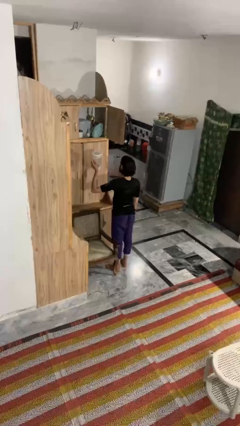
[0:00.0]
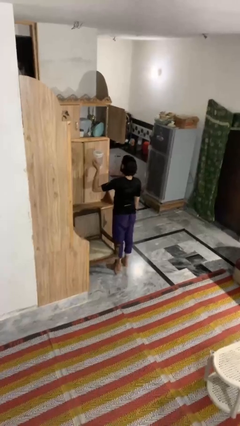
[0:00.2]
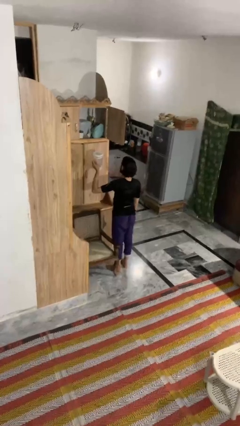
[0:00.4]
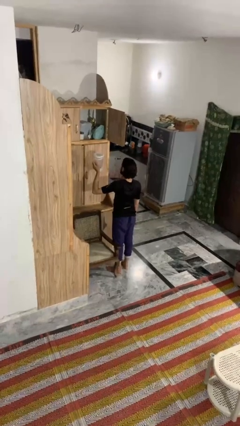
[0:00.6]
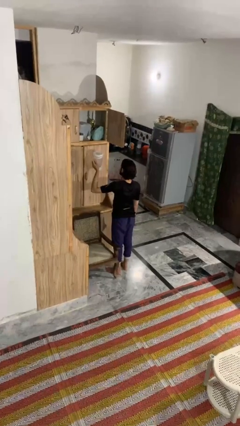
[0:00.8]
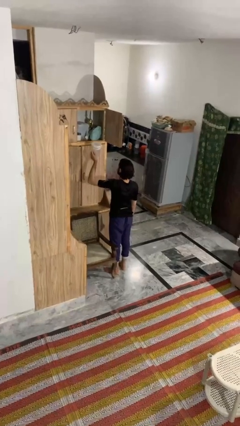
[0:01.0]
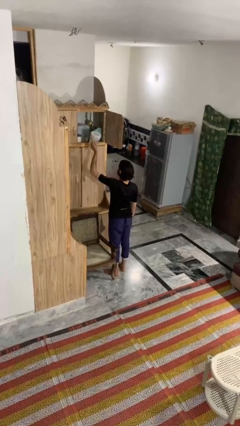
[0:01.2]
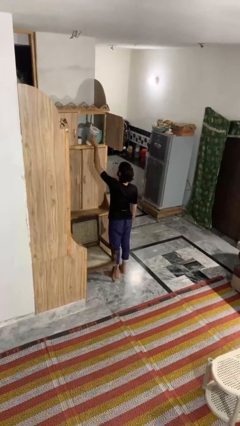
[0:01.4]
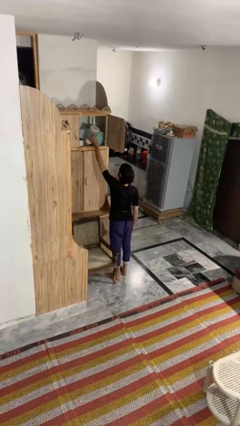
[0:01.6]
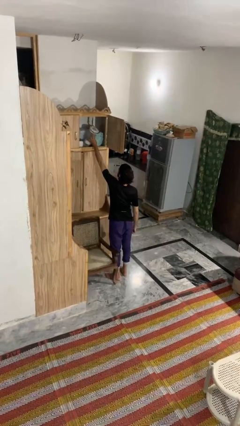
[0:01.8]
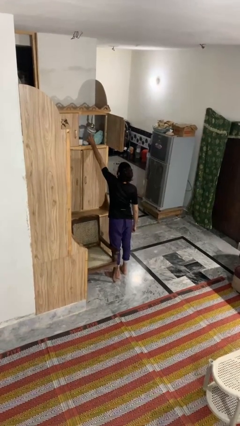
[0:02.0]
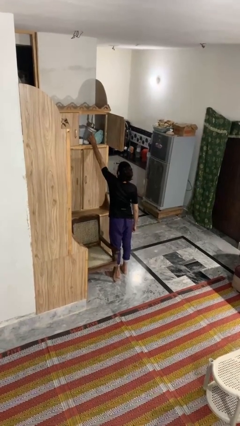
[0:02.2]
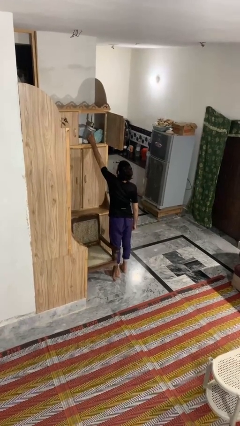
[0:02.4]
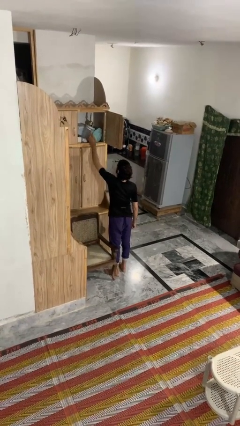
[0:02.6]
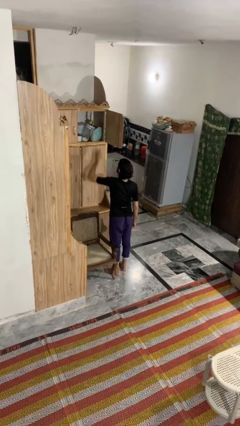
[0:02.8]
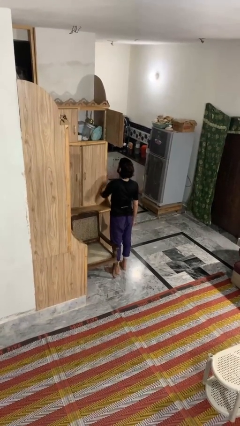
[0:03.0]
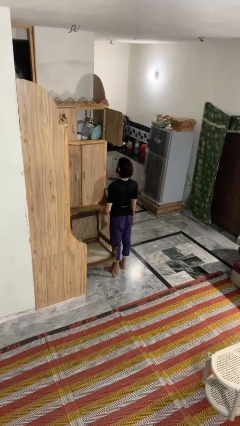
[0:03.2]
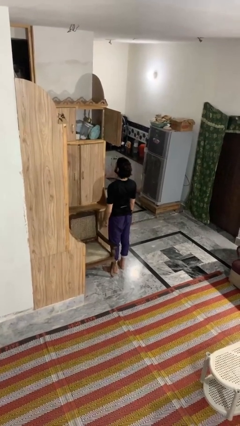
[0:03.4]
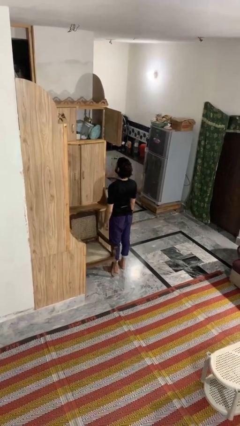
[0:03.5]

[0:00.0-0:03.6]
person puts down object on shelf

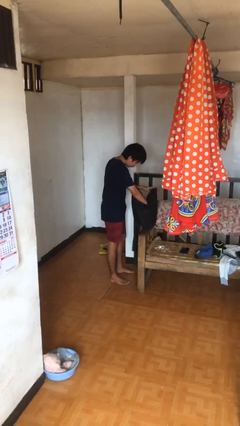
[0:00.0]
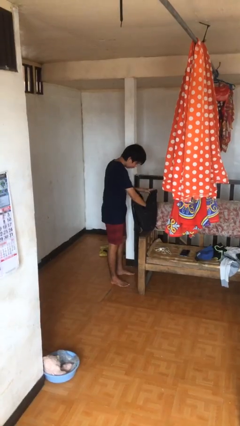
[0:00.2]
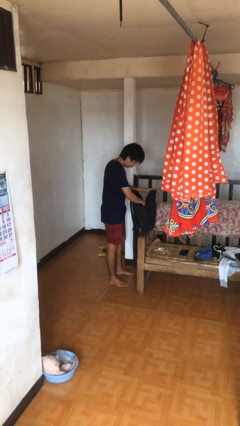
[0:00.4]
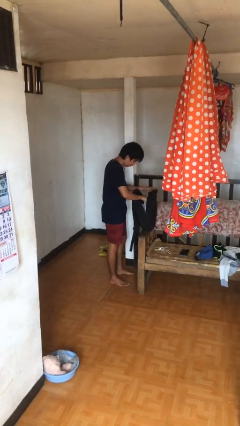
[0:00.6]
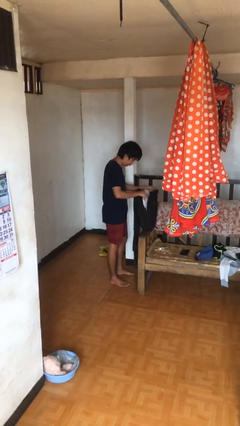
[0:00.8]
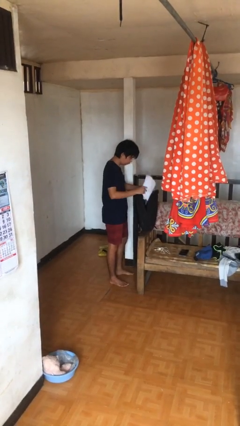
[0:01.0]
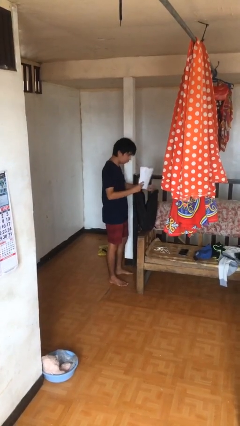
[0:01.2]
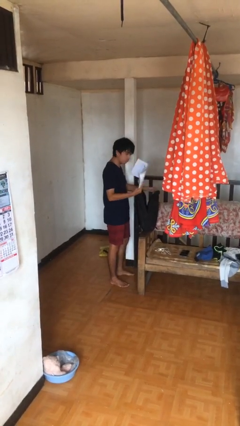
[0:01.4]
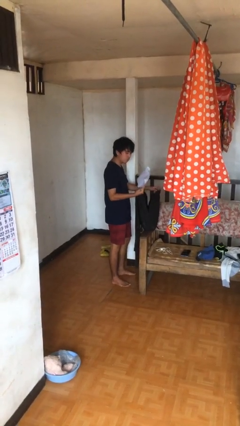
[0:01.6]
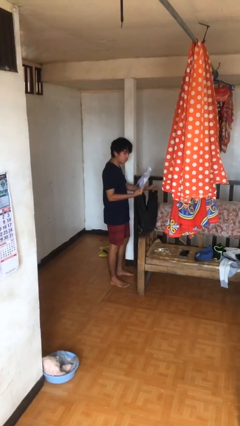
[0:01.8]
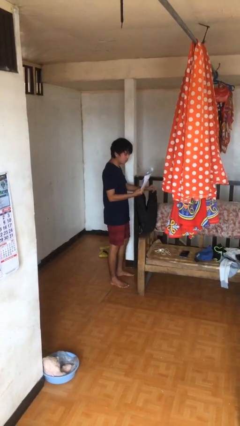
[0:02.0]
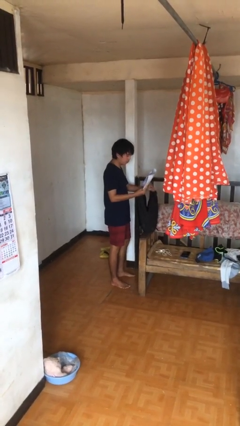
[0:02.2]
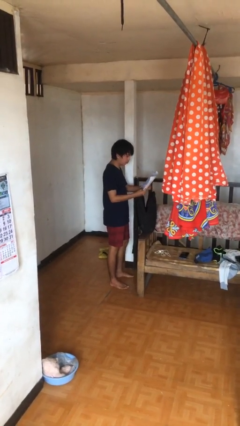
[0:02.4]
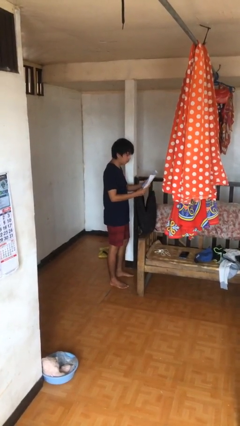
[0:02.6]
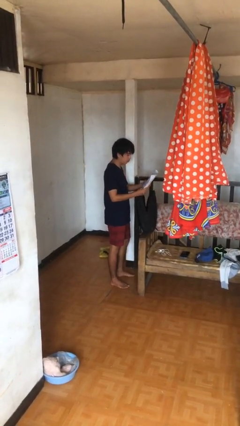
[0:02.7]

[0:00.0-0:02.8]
person takes object from backpack

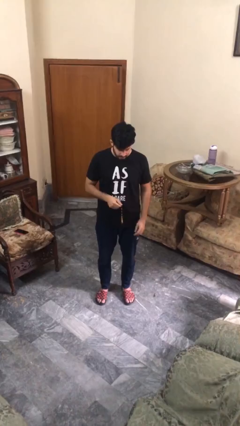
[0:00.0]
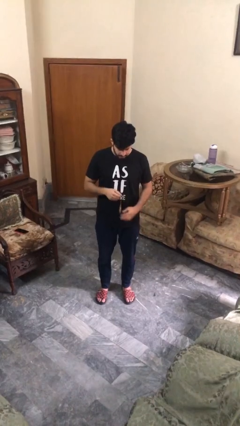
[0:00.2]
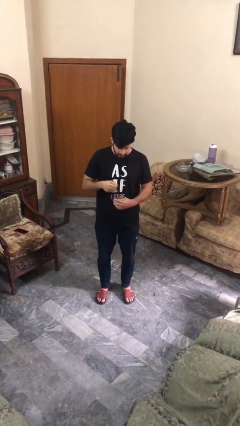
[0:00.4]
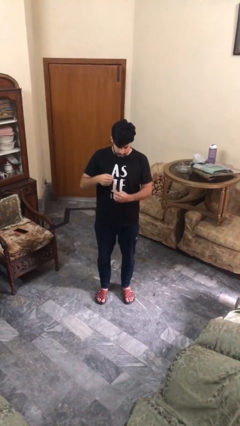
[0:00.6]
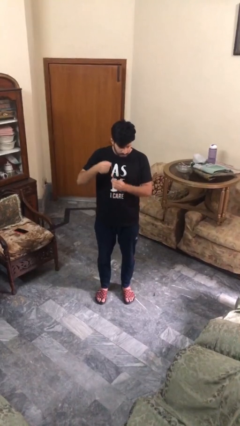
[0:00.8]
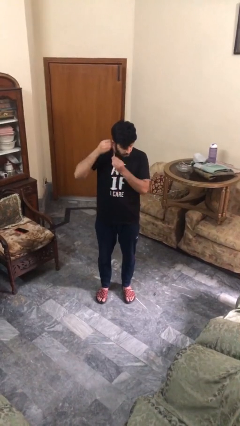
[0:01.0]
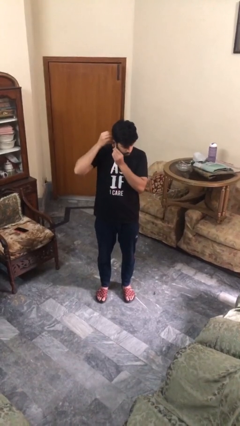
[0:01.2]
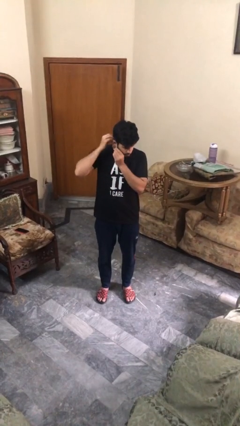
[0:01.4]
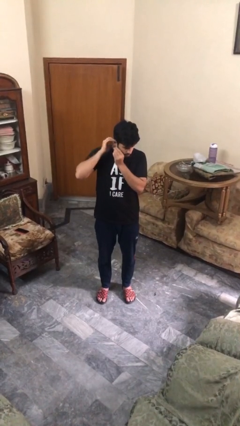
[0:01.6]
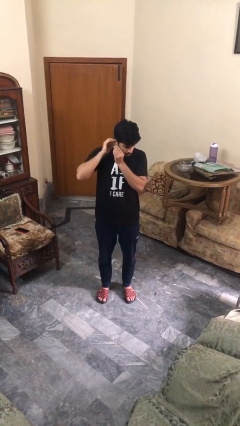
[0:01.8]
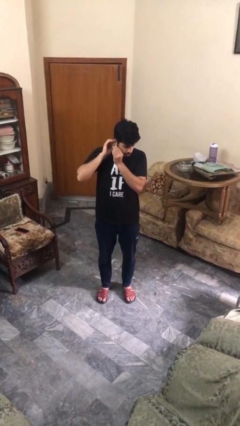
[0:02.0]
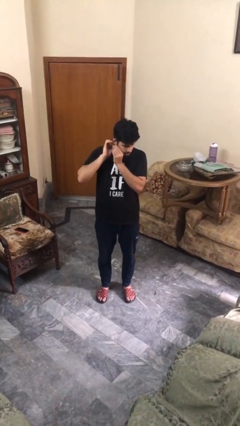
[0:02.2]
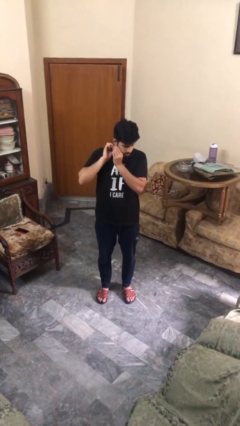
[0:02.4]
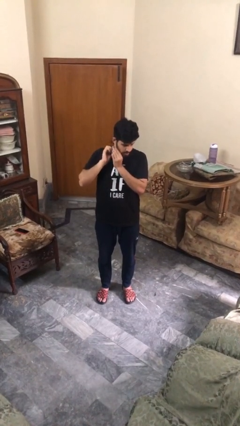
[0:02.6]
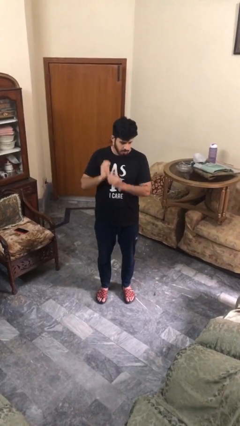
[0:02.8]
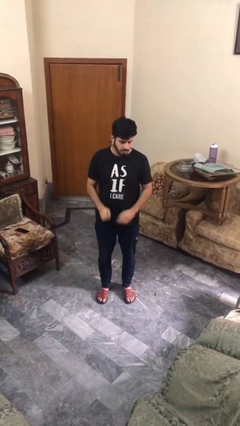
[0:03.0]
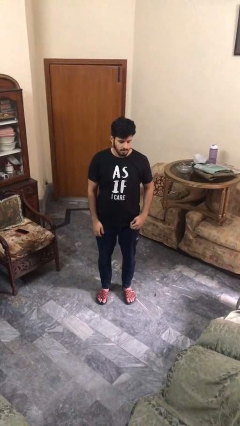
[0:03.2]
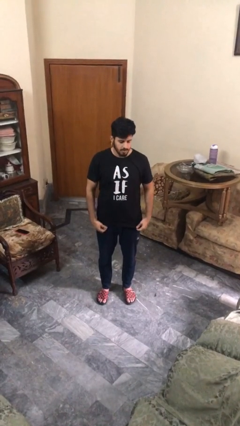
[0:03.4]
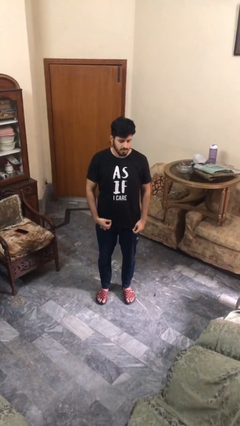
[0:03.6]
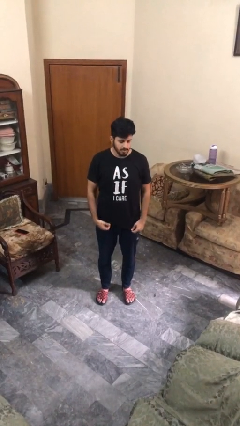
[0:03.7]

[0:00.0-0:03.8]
person puts on earrings

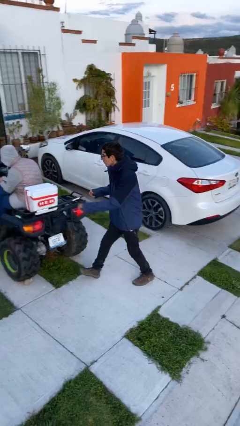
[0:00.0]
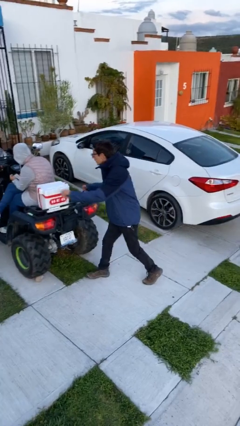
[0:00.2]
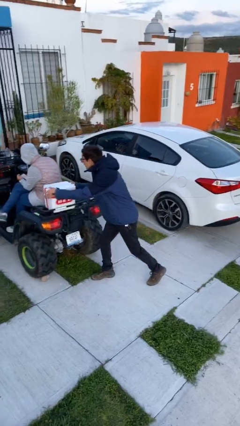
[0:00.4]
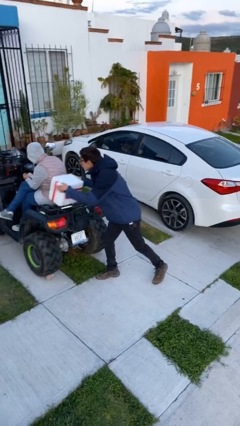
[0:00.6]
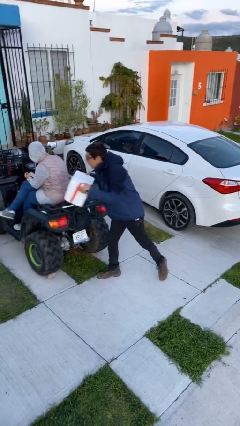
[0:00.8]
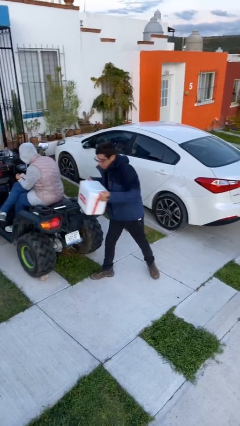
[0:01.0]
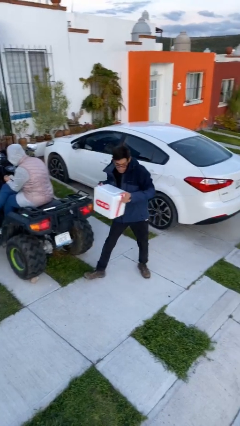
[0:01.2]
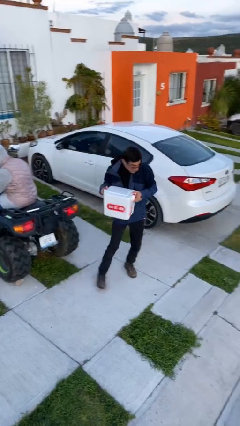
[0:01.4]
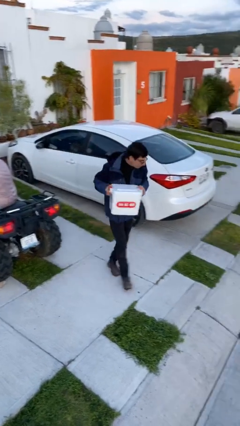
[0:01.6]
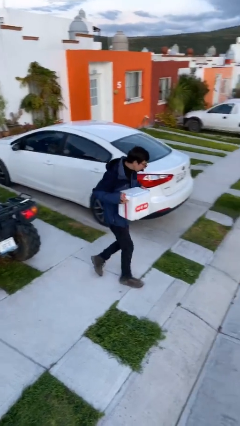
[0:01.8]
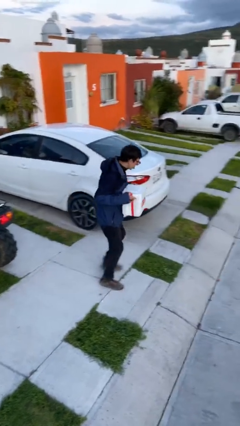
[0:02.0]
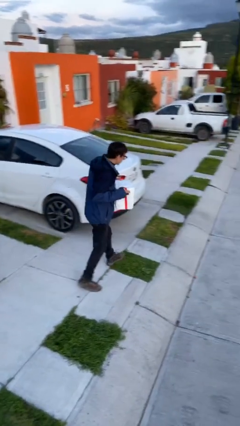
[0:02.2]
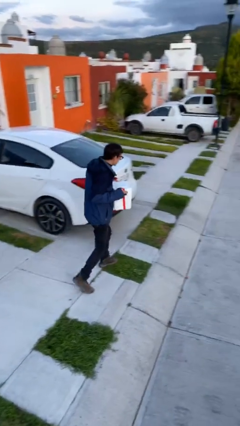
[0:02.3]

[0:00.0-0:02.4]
person steals object from person

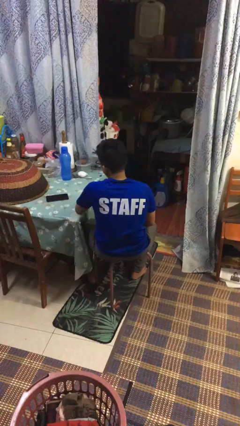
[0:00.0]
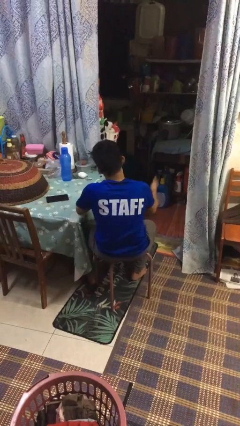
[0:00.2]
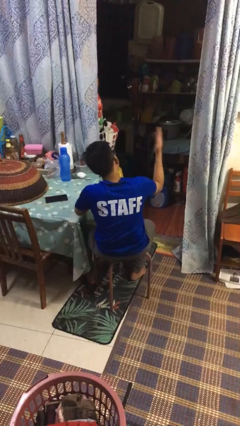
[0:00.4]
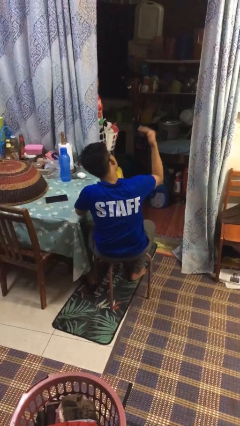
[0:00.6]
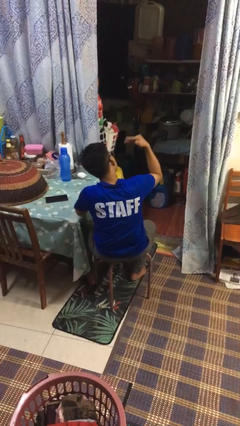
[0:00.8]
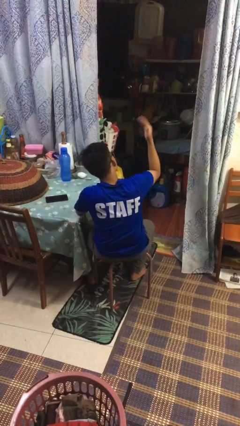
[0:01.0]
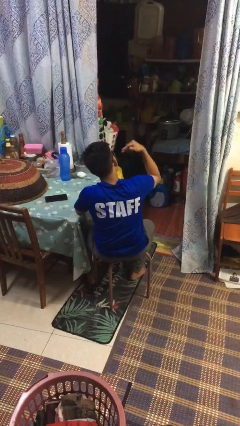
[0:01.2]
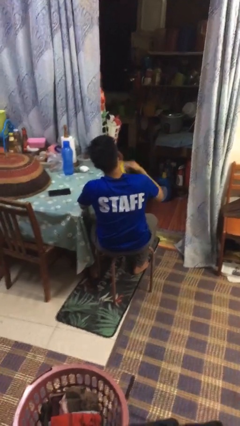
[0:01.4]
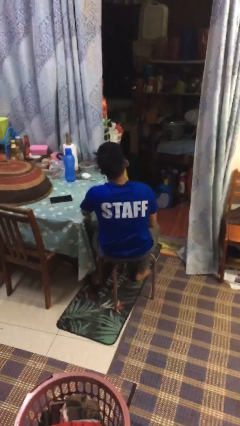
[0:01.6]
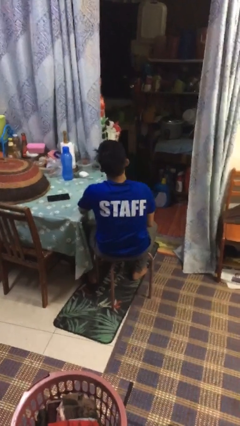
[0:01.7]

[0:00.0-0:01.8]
person gestures come here

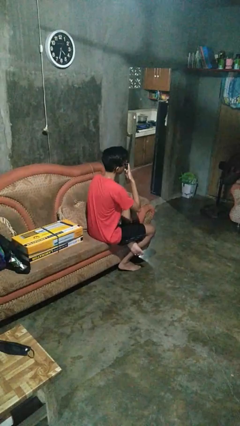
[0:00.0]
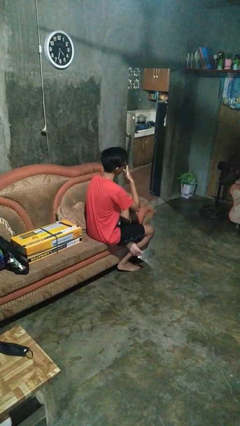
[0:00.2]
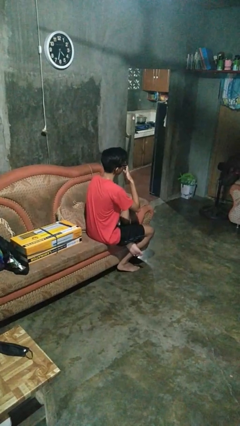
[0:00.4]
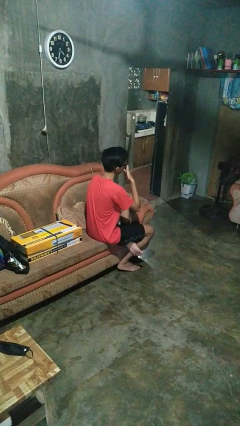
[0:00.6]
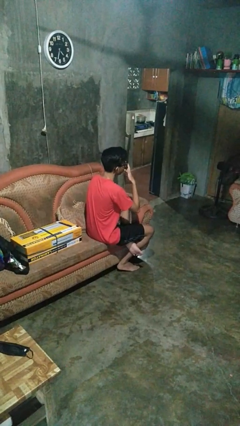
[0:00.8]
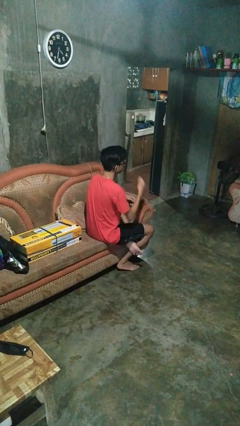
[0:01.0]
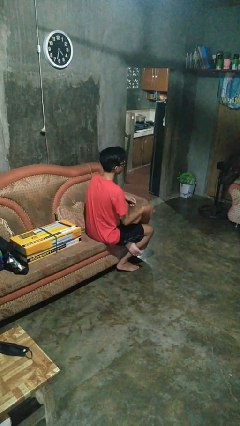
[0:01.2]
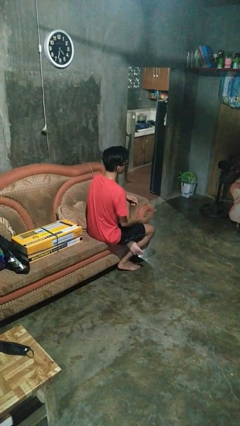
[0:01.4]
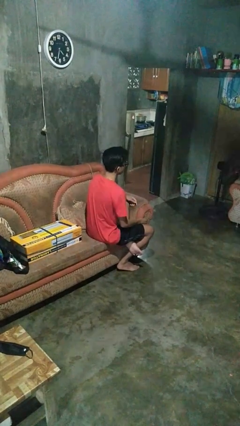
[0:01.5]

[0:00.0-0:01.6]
person licks fingers

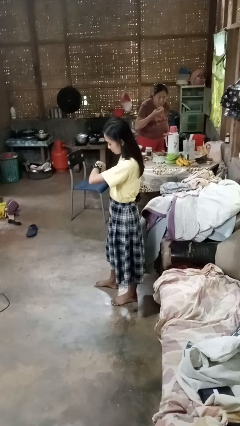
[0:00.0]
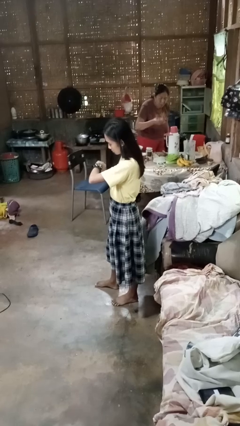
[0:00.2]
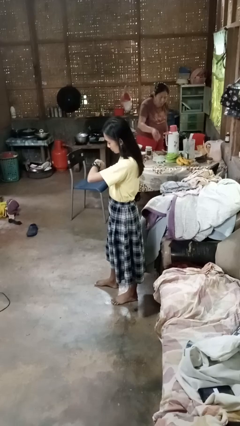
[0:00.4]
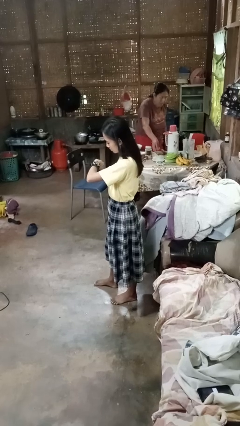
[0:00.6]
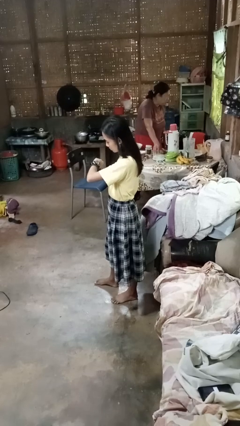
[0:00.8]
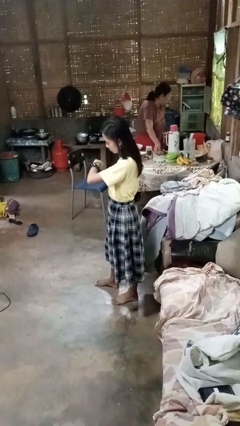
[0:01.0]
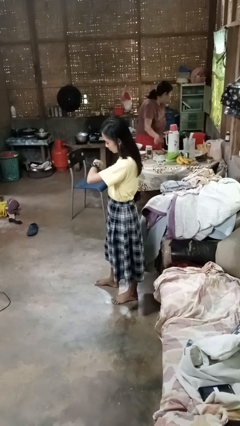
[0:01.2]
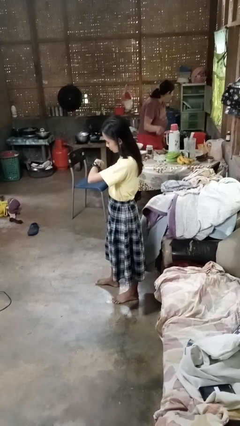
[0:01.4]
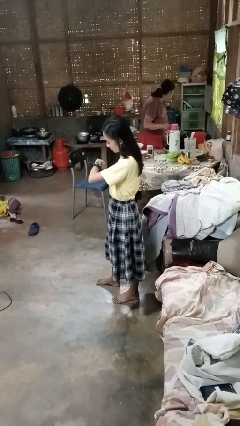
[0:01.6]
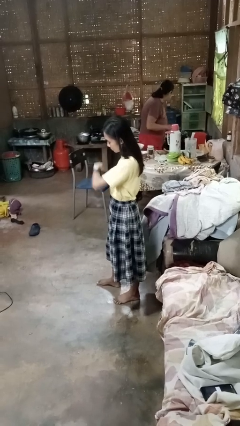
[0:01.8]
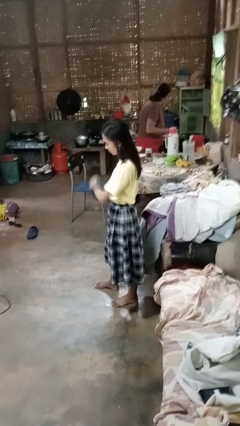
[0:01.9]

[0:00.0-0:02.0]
person looks at wristwatch
